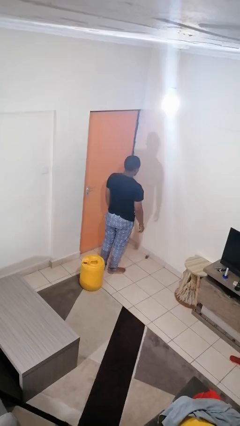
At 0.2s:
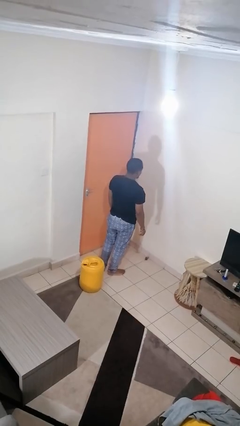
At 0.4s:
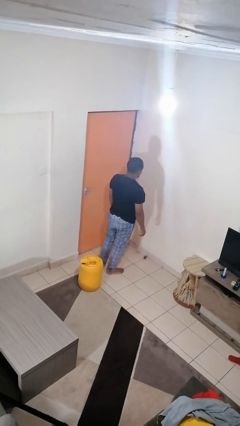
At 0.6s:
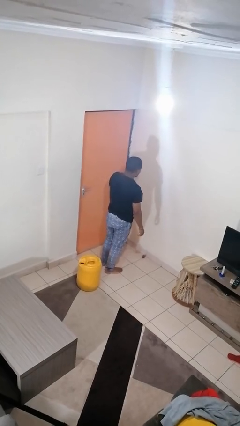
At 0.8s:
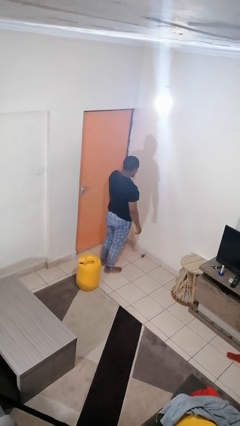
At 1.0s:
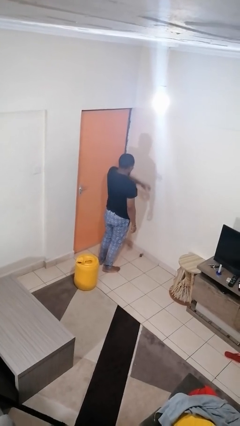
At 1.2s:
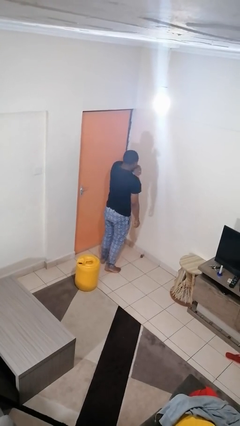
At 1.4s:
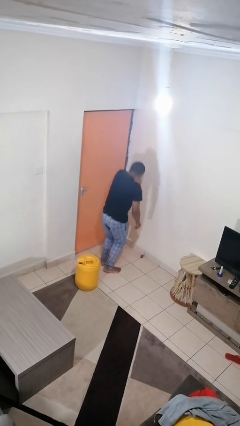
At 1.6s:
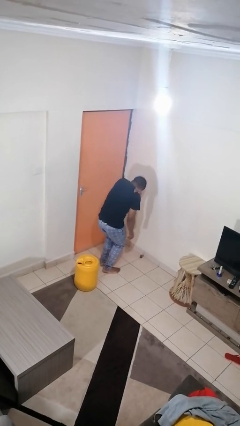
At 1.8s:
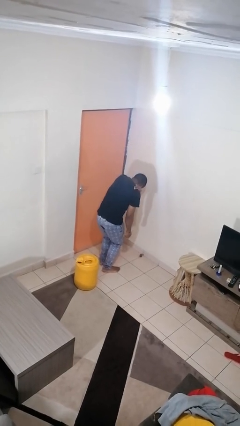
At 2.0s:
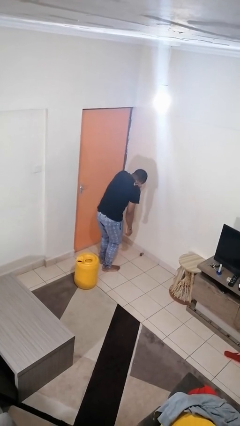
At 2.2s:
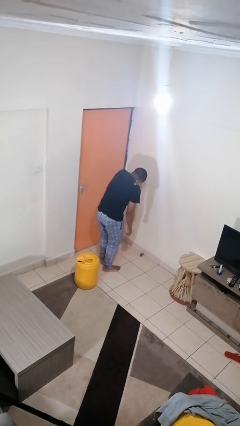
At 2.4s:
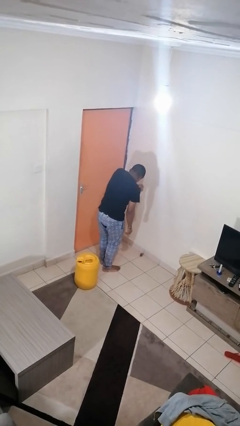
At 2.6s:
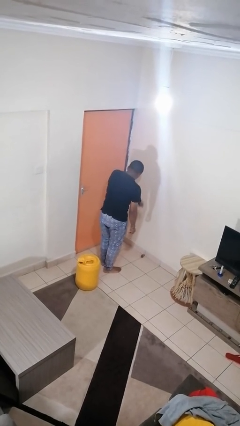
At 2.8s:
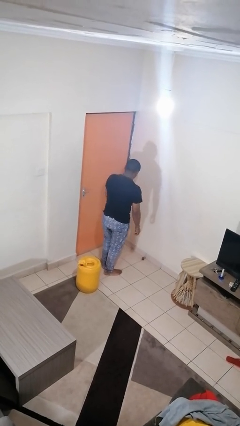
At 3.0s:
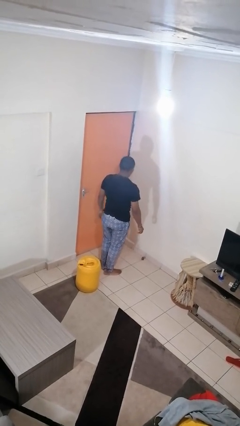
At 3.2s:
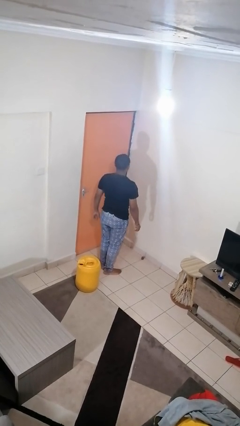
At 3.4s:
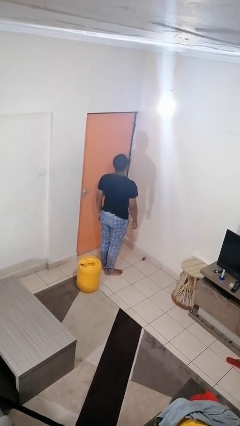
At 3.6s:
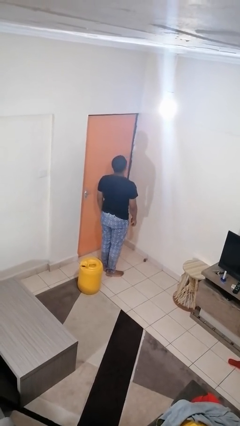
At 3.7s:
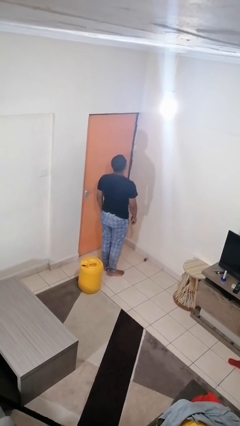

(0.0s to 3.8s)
person sneezes into arm

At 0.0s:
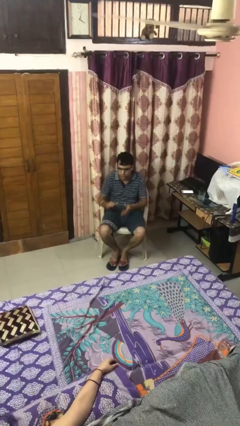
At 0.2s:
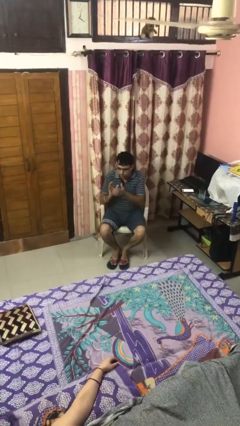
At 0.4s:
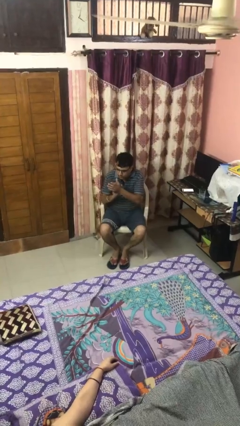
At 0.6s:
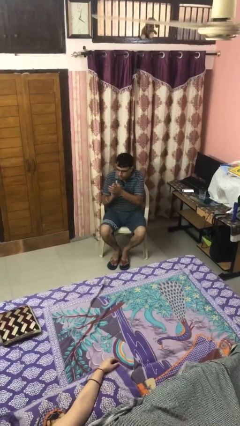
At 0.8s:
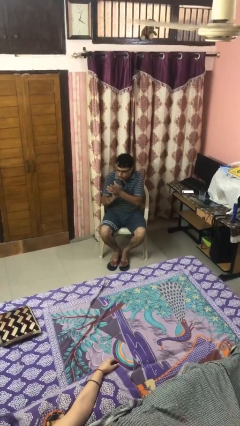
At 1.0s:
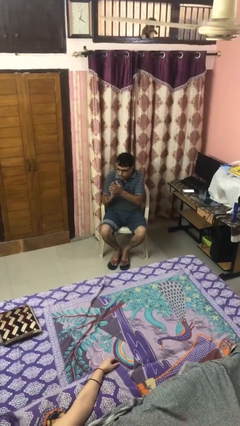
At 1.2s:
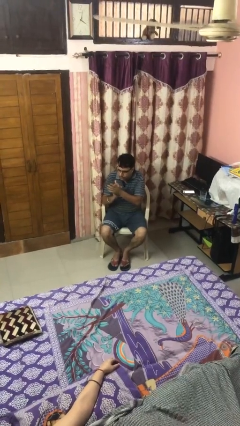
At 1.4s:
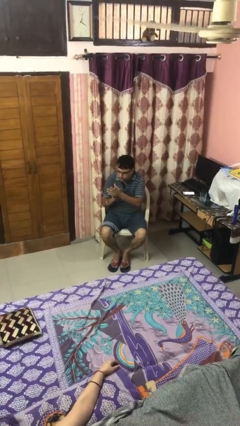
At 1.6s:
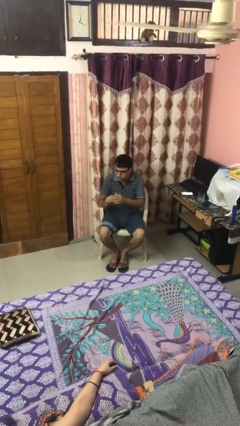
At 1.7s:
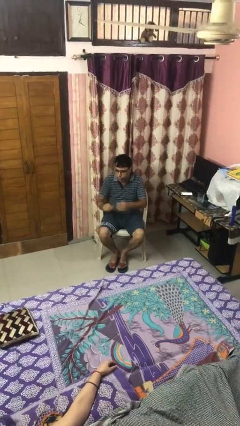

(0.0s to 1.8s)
person claps hands

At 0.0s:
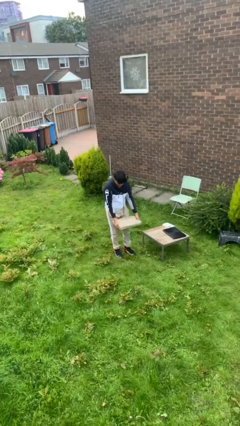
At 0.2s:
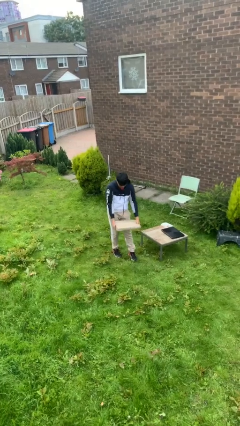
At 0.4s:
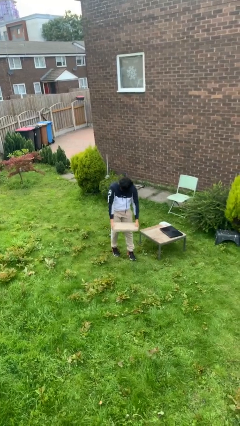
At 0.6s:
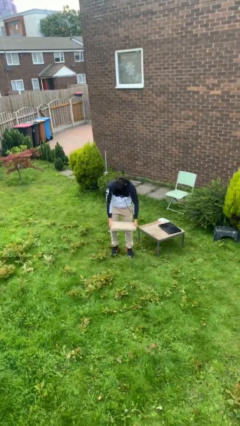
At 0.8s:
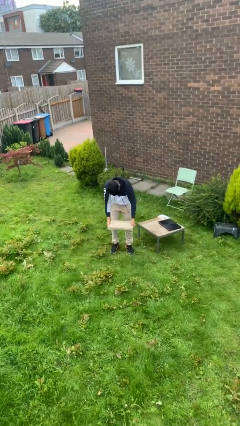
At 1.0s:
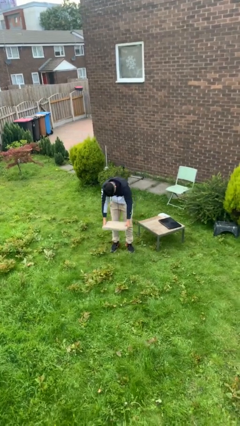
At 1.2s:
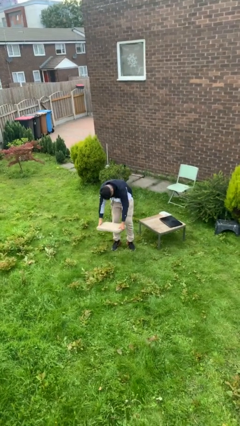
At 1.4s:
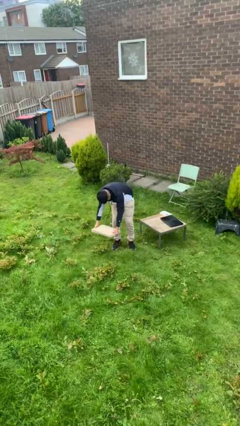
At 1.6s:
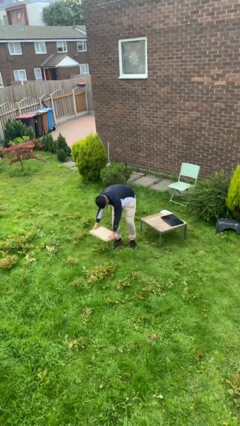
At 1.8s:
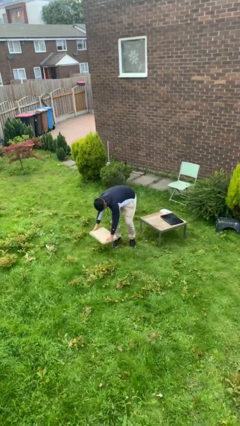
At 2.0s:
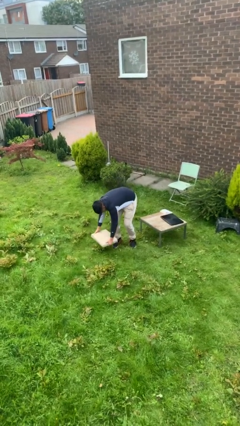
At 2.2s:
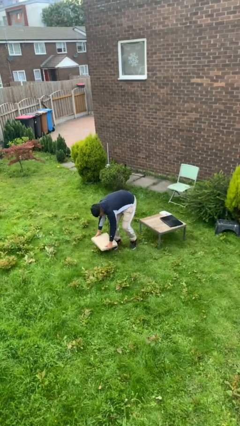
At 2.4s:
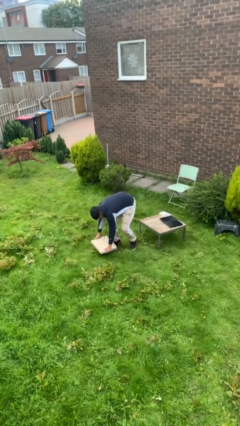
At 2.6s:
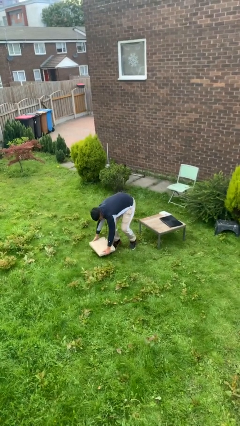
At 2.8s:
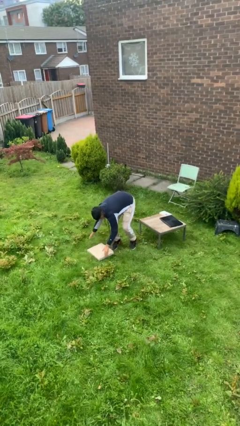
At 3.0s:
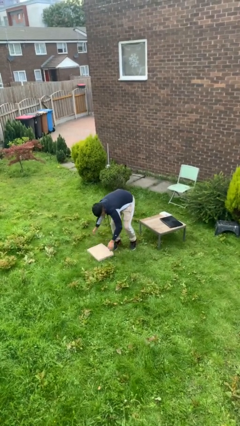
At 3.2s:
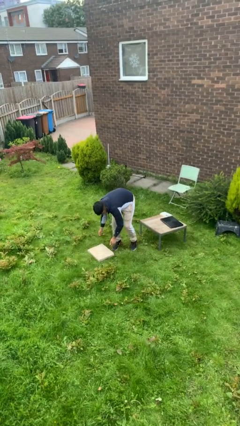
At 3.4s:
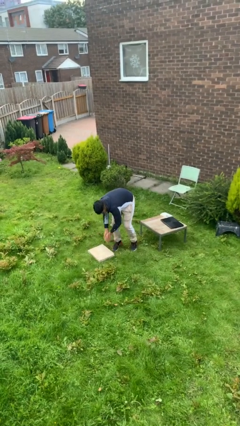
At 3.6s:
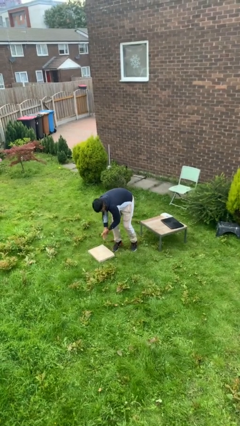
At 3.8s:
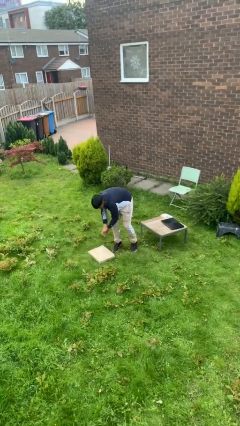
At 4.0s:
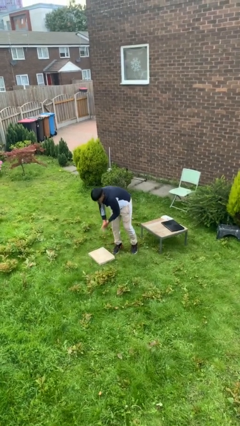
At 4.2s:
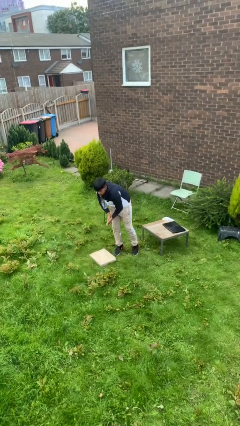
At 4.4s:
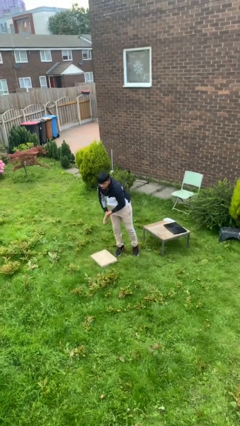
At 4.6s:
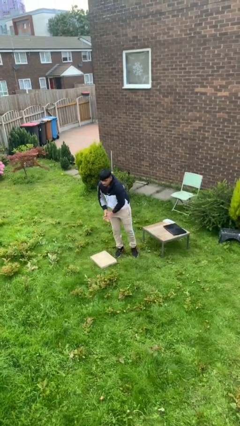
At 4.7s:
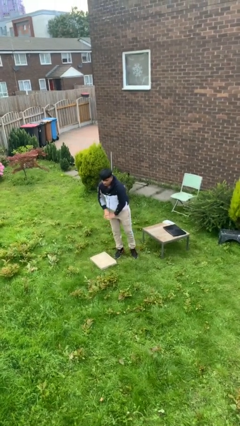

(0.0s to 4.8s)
person puts down object on floor

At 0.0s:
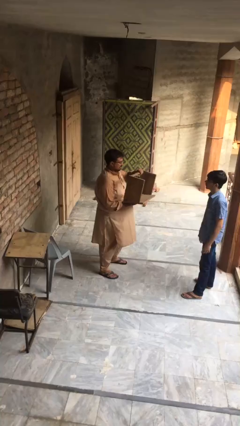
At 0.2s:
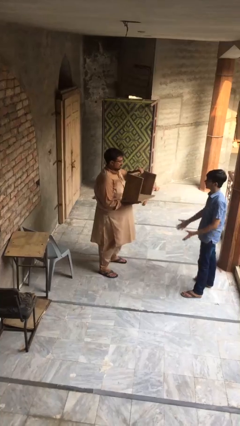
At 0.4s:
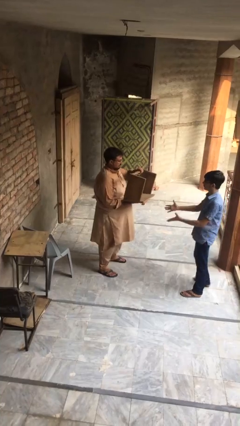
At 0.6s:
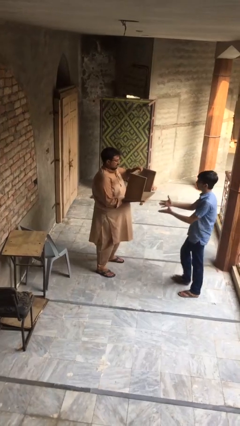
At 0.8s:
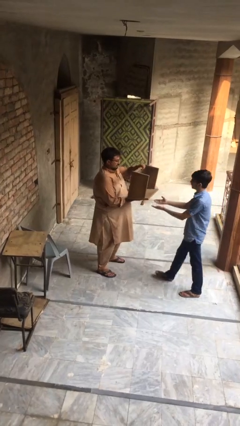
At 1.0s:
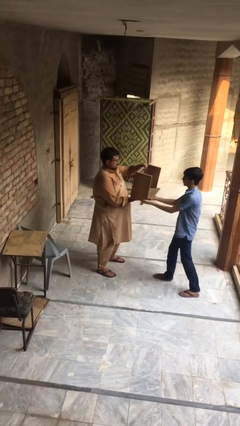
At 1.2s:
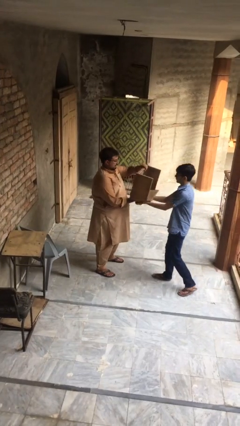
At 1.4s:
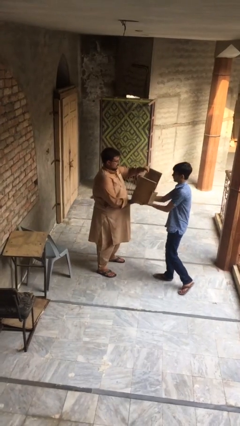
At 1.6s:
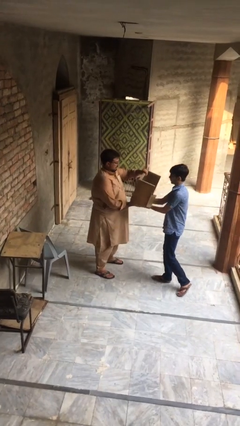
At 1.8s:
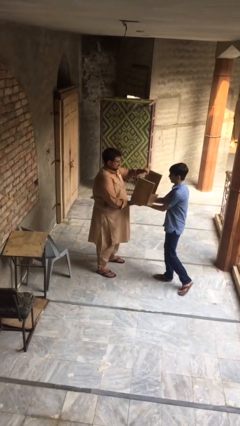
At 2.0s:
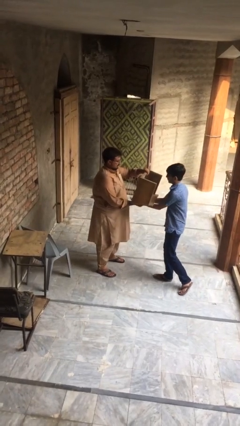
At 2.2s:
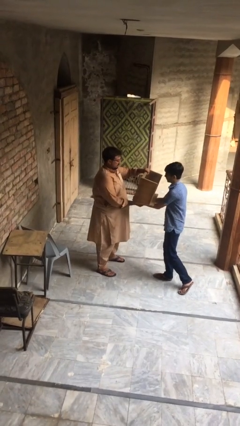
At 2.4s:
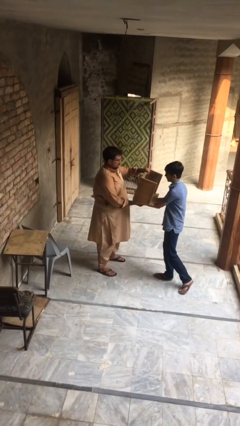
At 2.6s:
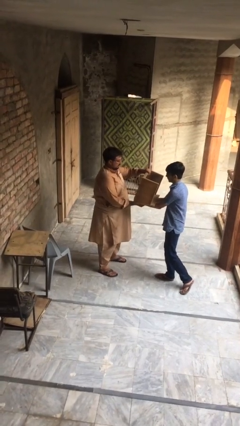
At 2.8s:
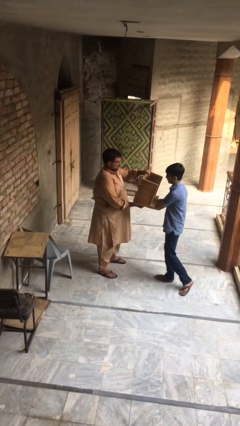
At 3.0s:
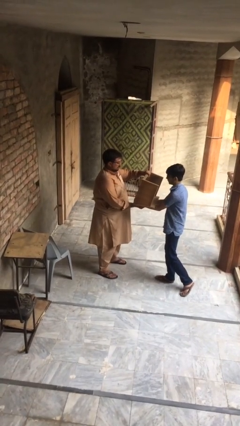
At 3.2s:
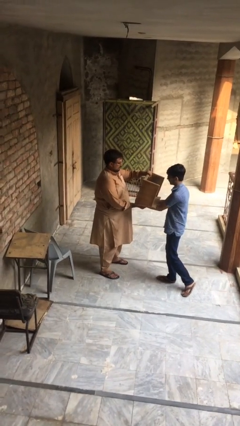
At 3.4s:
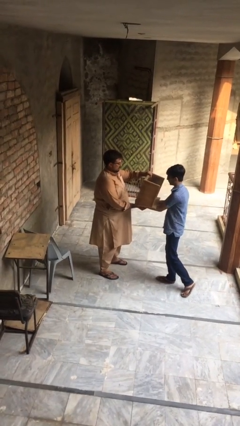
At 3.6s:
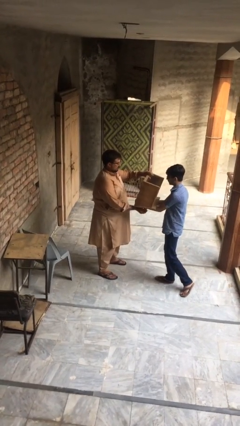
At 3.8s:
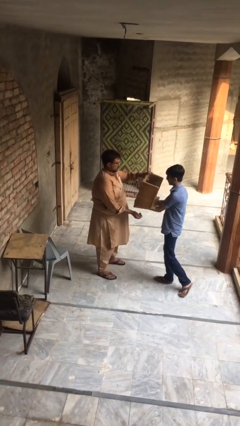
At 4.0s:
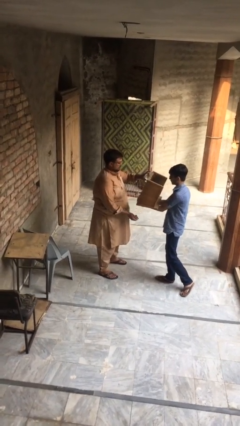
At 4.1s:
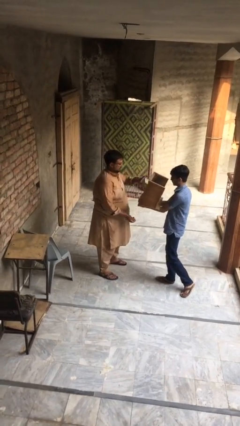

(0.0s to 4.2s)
person transfers object to person

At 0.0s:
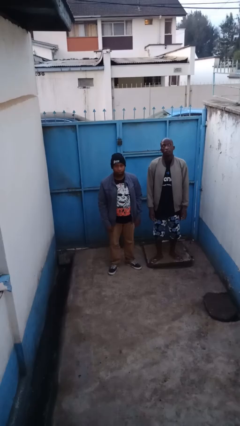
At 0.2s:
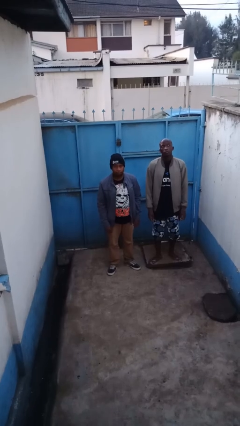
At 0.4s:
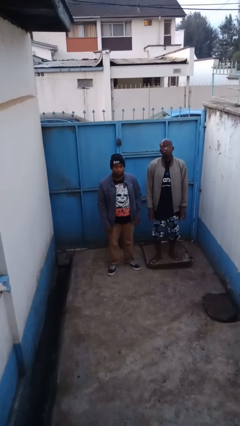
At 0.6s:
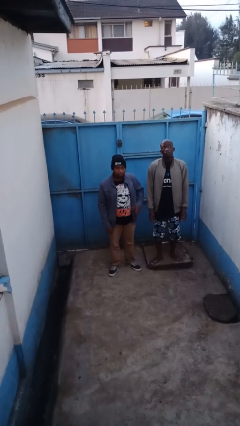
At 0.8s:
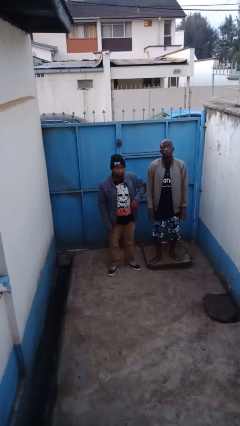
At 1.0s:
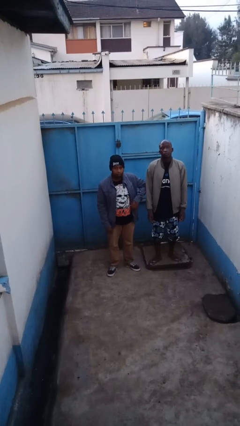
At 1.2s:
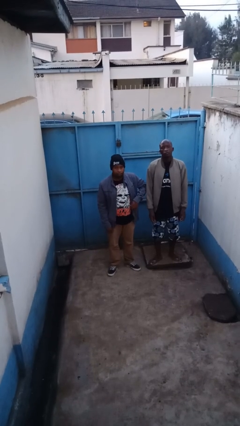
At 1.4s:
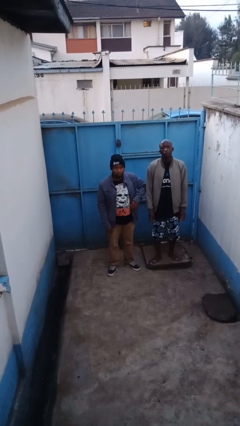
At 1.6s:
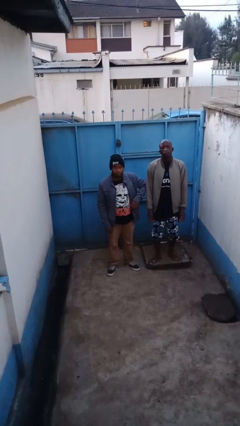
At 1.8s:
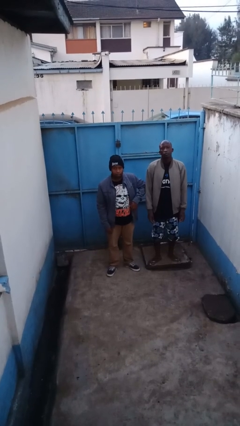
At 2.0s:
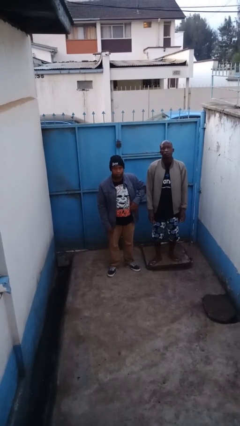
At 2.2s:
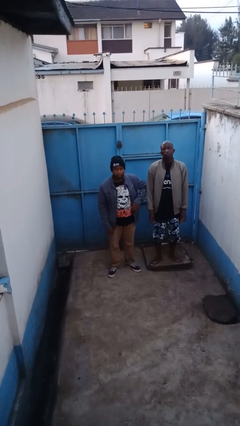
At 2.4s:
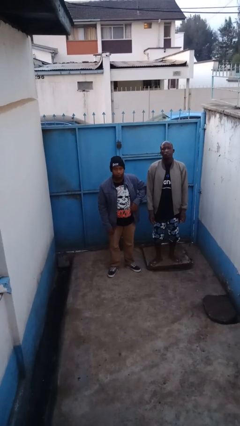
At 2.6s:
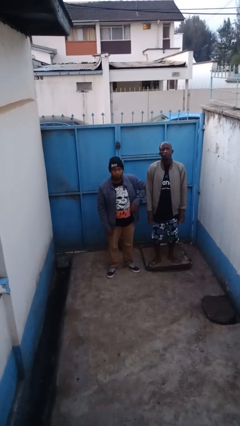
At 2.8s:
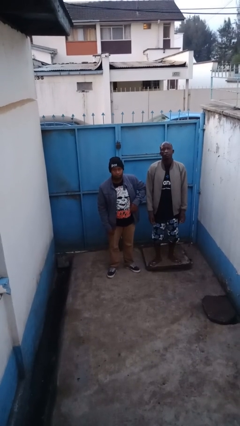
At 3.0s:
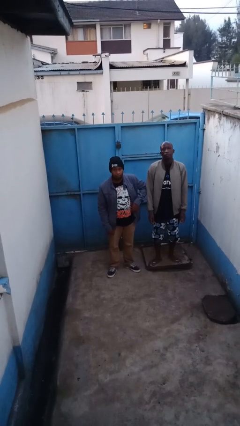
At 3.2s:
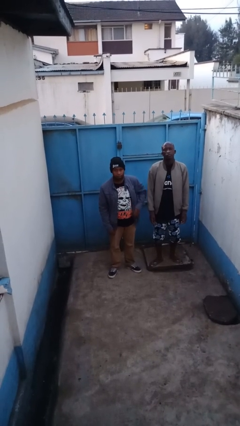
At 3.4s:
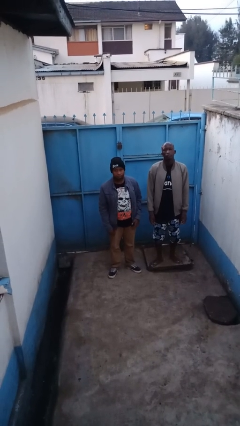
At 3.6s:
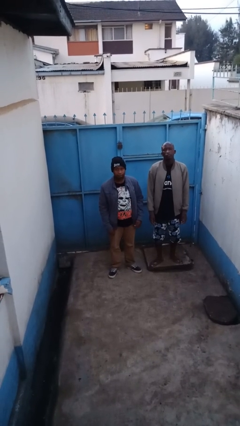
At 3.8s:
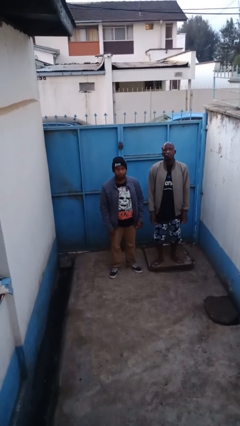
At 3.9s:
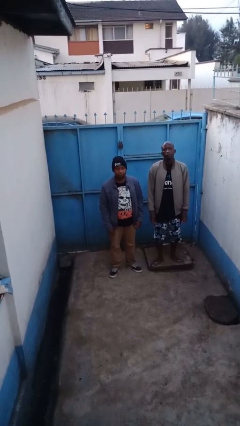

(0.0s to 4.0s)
person nudges person with elbow
